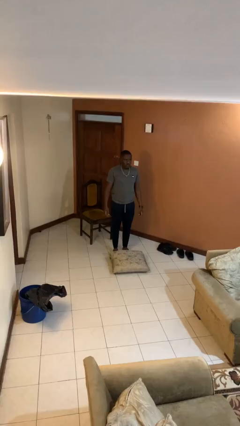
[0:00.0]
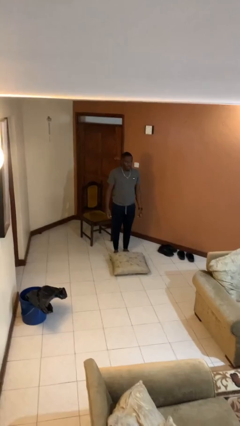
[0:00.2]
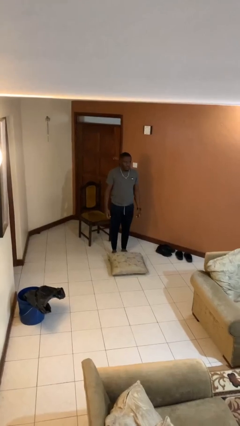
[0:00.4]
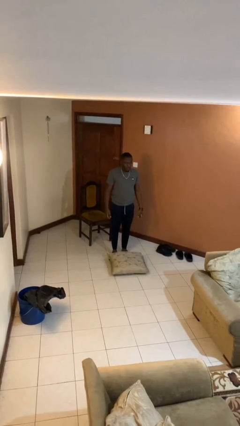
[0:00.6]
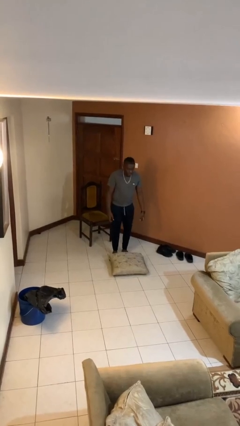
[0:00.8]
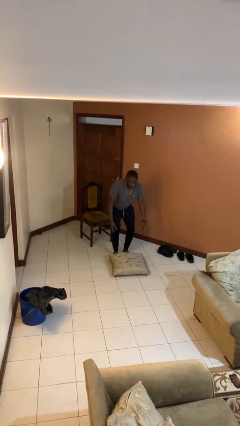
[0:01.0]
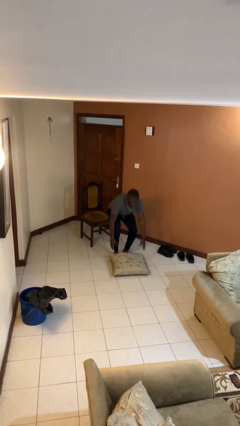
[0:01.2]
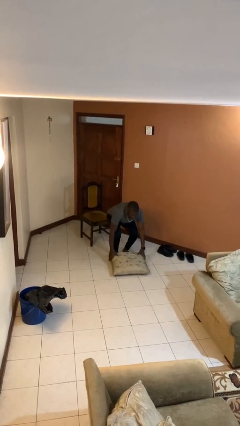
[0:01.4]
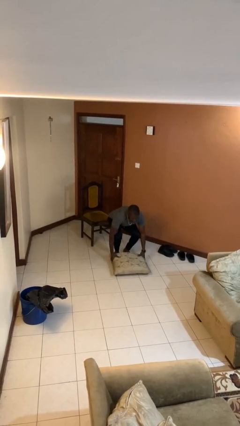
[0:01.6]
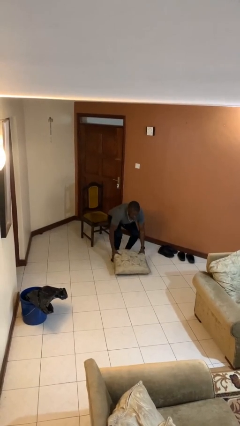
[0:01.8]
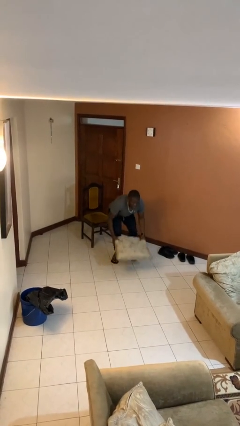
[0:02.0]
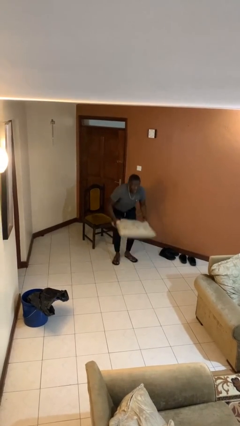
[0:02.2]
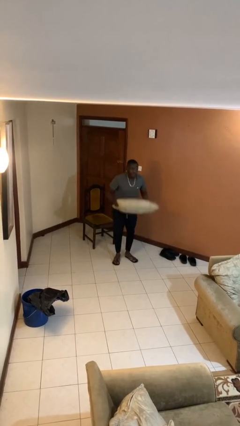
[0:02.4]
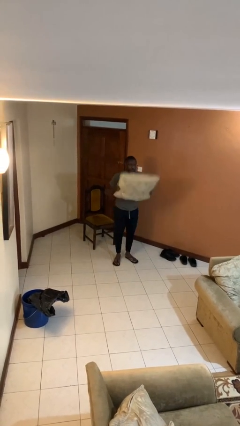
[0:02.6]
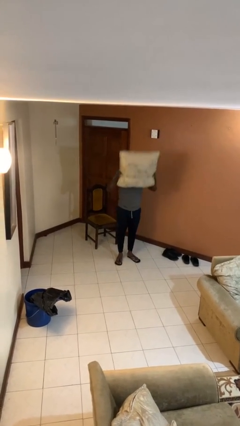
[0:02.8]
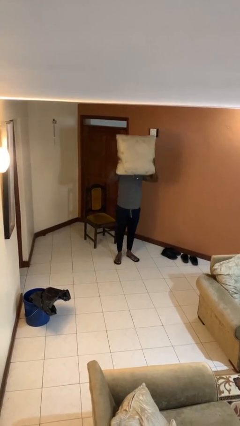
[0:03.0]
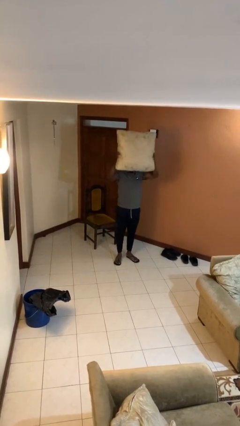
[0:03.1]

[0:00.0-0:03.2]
person picks up object from floor

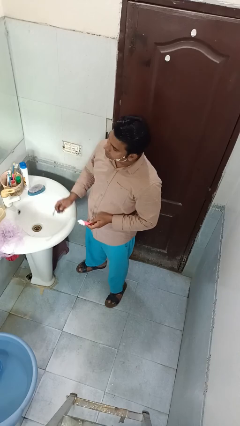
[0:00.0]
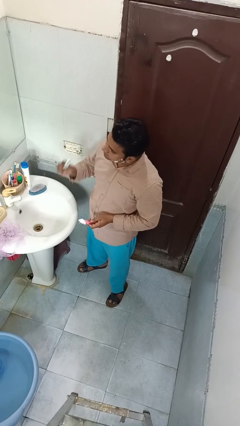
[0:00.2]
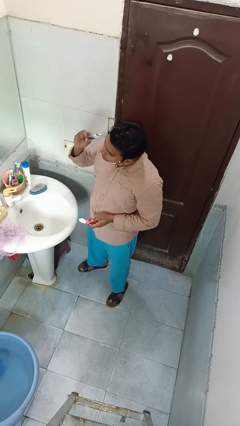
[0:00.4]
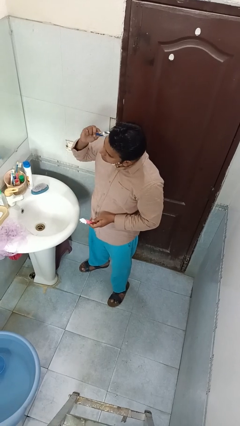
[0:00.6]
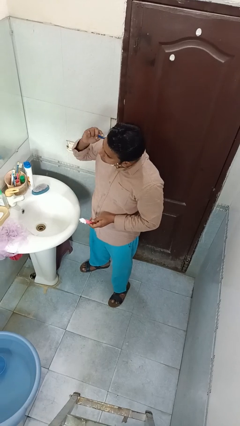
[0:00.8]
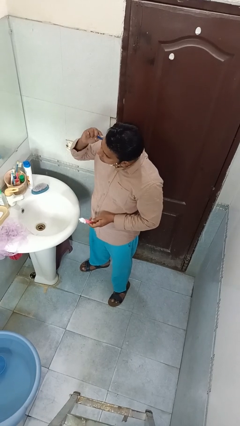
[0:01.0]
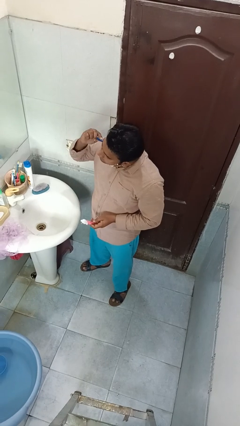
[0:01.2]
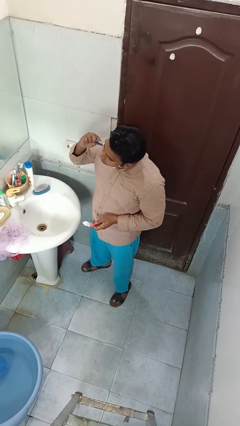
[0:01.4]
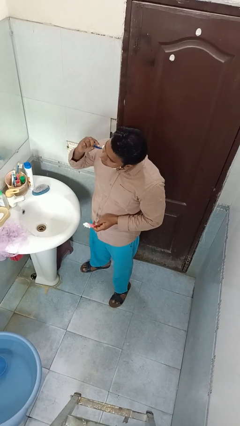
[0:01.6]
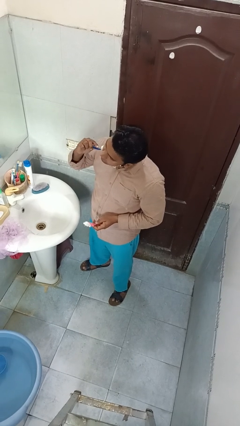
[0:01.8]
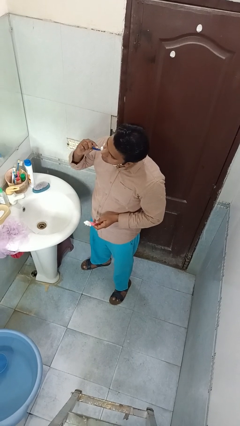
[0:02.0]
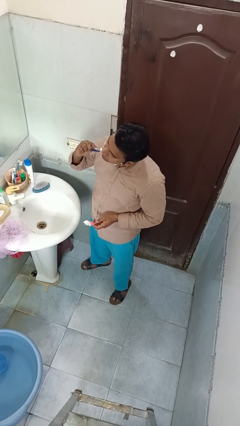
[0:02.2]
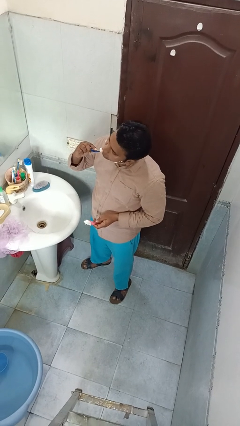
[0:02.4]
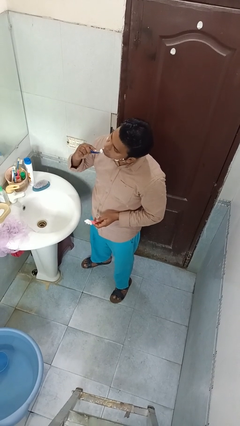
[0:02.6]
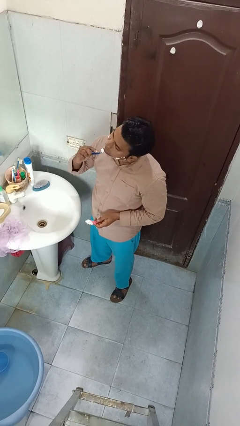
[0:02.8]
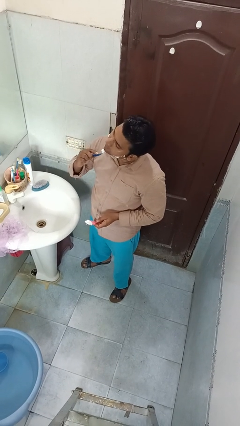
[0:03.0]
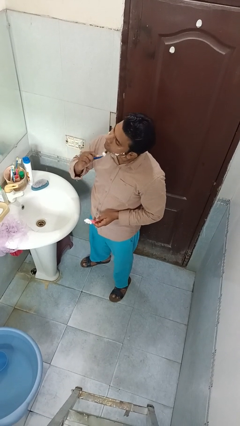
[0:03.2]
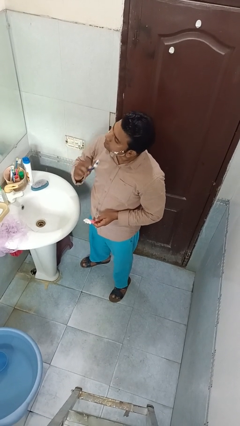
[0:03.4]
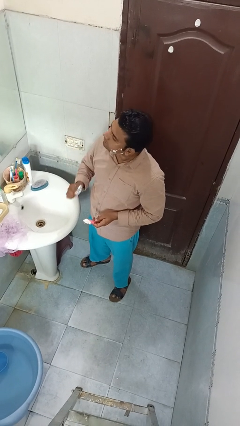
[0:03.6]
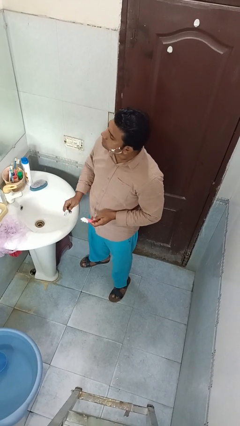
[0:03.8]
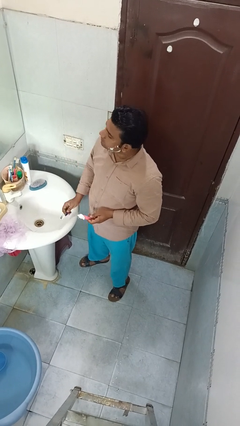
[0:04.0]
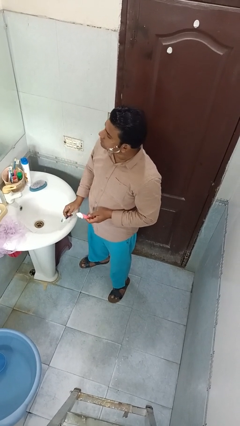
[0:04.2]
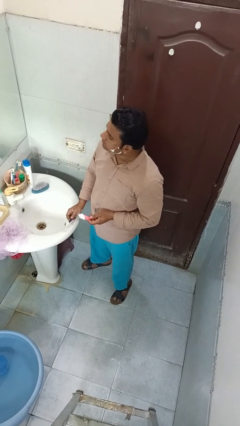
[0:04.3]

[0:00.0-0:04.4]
person shaves face

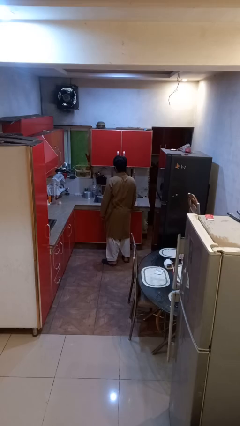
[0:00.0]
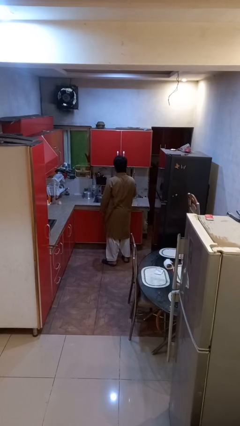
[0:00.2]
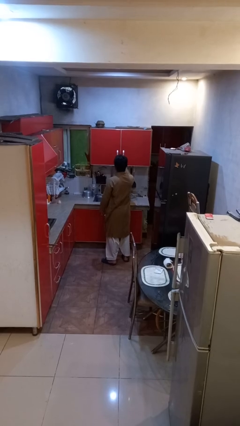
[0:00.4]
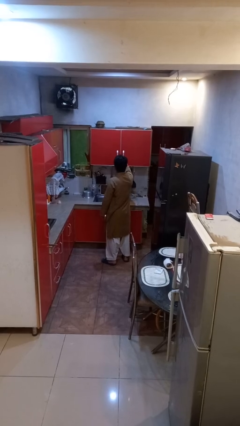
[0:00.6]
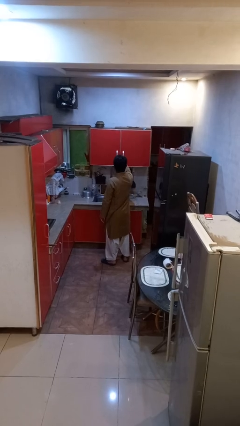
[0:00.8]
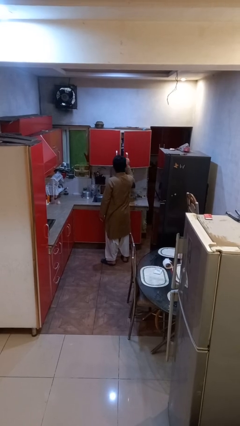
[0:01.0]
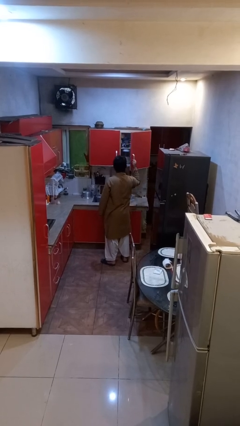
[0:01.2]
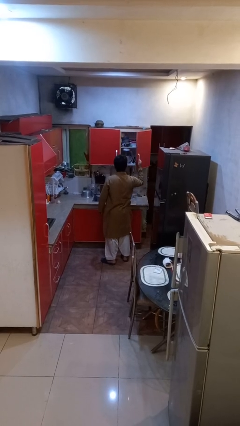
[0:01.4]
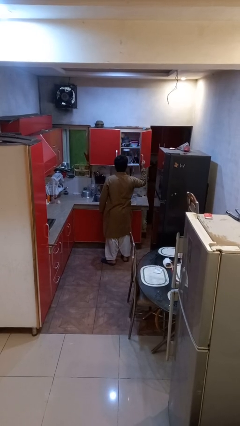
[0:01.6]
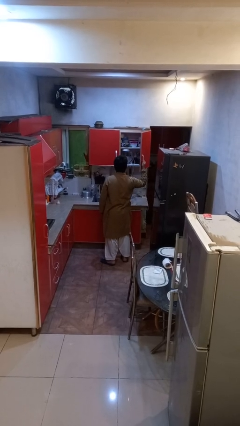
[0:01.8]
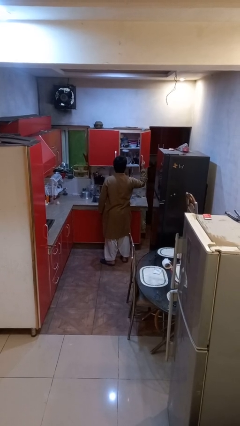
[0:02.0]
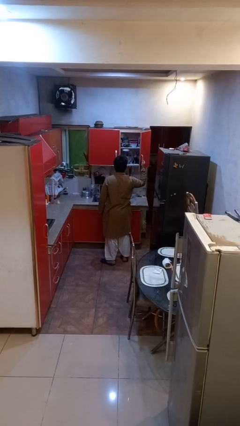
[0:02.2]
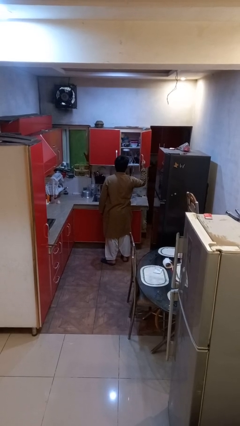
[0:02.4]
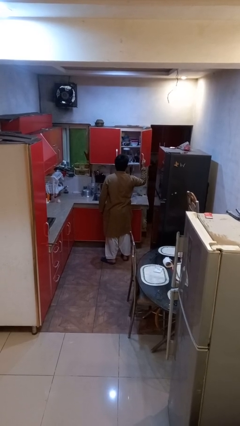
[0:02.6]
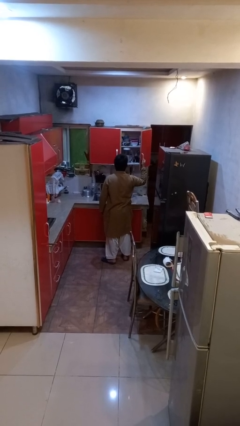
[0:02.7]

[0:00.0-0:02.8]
person opens cabinet

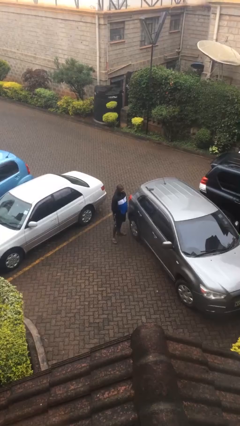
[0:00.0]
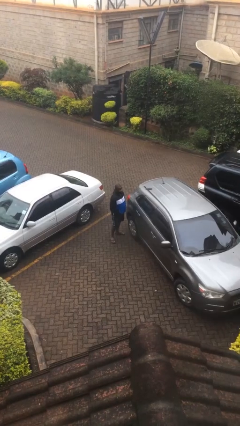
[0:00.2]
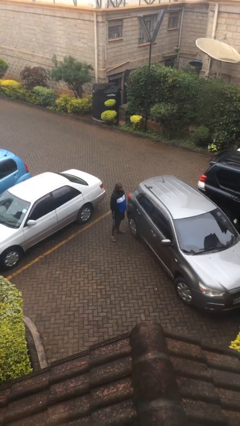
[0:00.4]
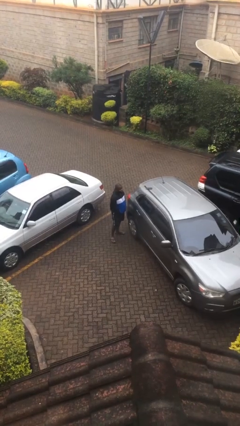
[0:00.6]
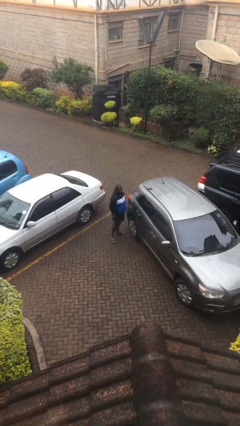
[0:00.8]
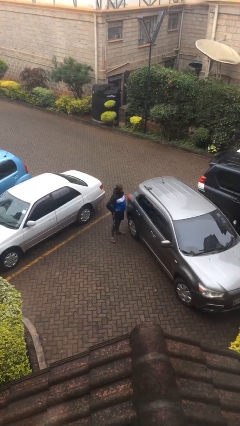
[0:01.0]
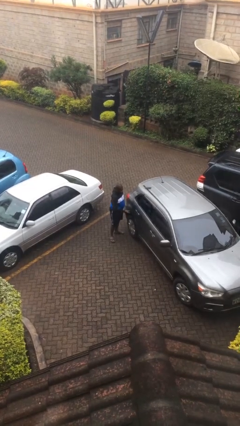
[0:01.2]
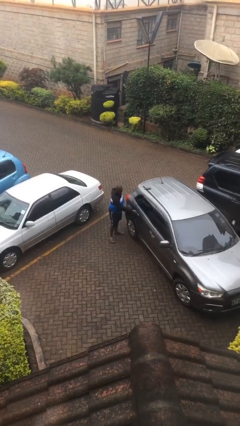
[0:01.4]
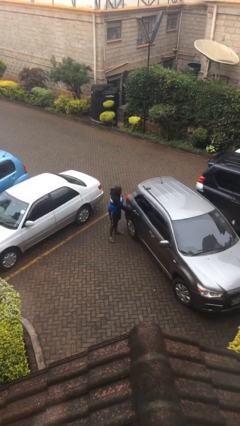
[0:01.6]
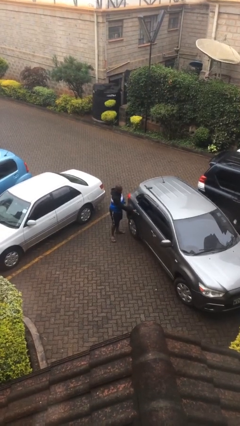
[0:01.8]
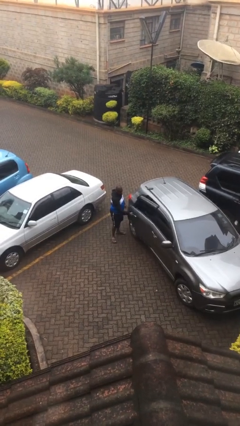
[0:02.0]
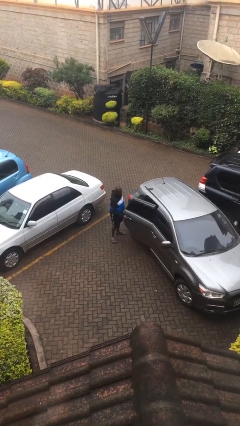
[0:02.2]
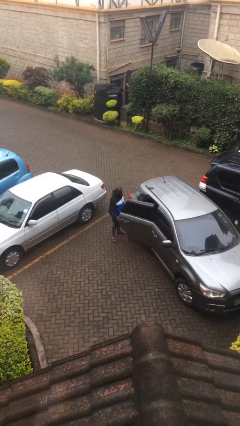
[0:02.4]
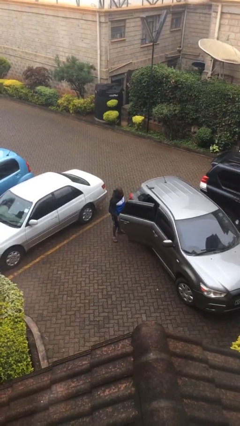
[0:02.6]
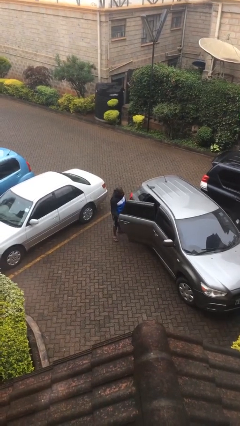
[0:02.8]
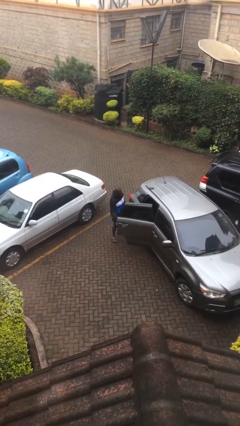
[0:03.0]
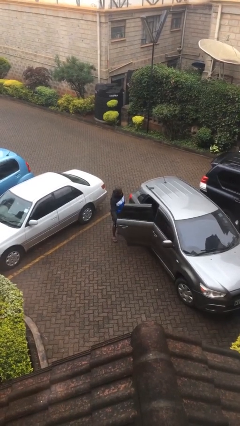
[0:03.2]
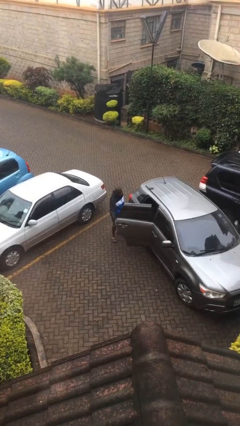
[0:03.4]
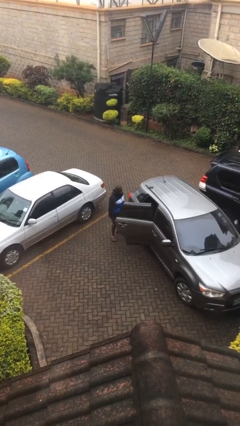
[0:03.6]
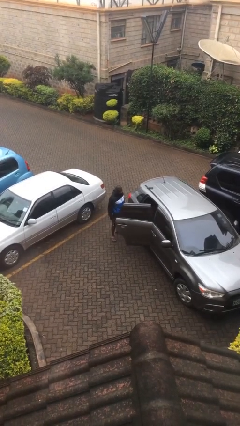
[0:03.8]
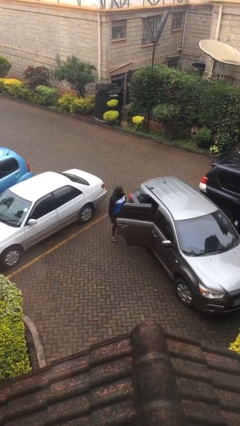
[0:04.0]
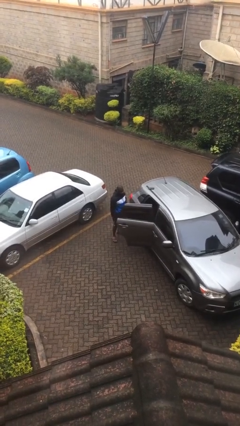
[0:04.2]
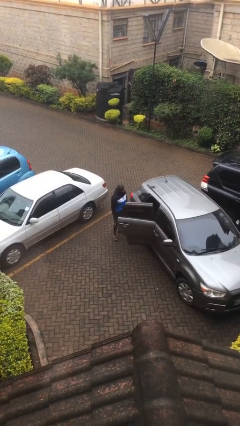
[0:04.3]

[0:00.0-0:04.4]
person opens car door

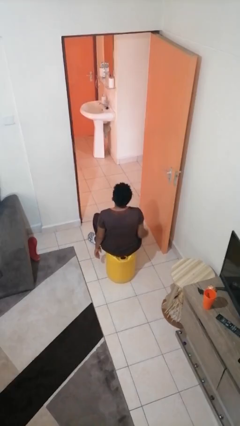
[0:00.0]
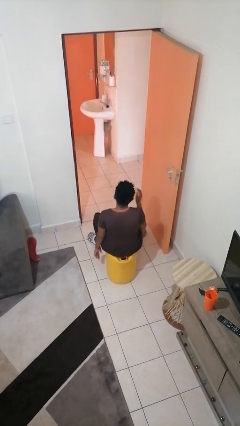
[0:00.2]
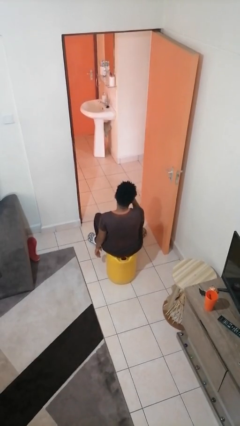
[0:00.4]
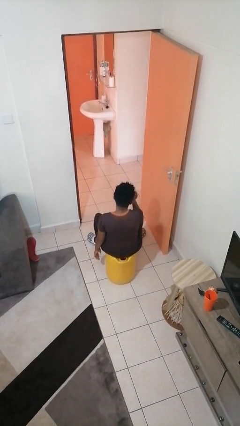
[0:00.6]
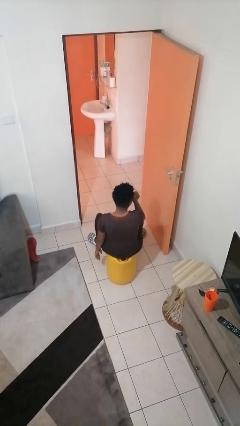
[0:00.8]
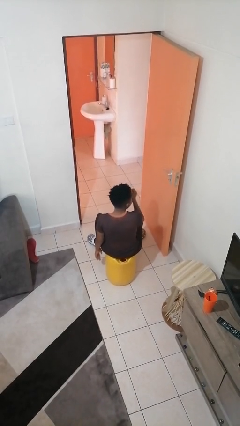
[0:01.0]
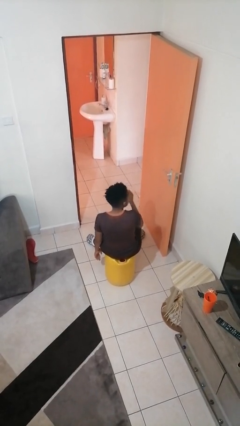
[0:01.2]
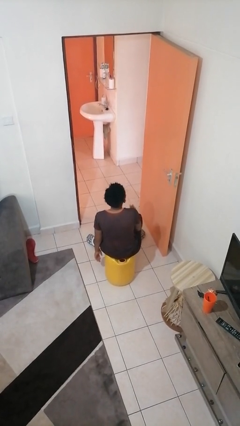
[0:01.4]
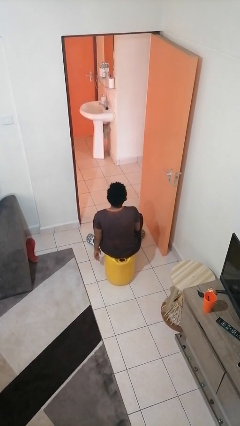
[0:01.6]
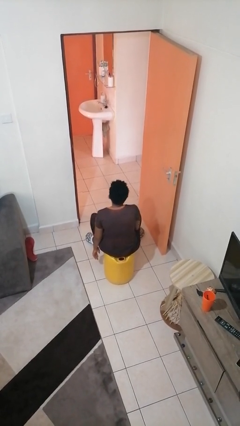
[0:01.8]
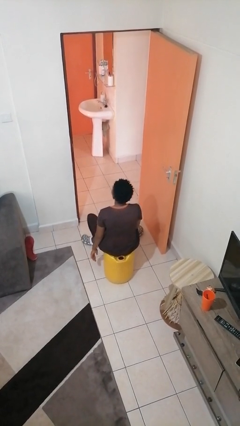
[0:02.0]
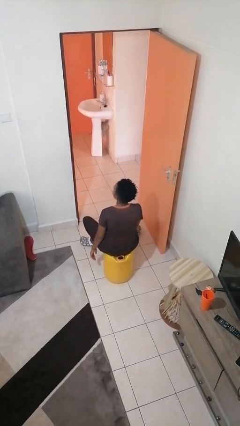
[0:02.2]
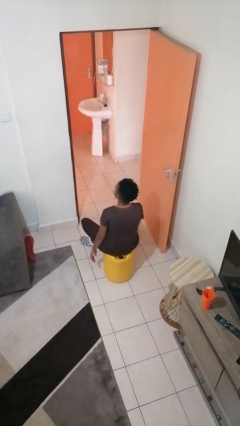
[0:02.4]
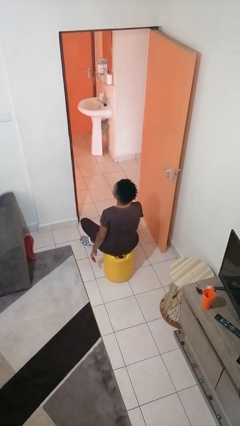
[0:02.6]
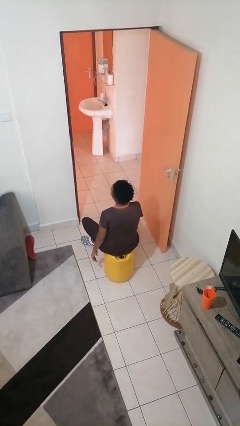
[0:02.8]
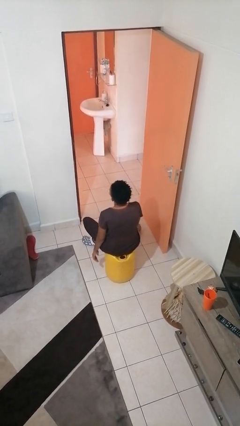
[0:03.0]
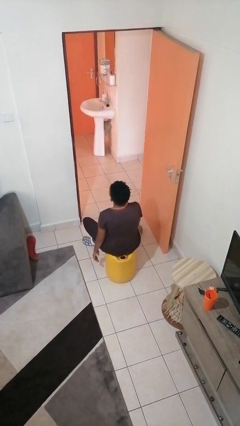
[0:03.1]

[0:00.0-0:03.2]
person takes off glasses
